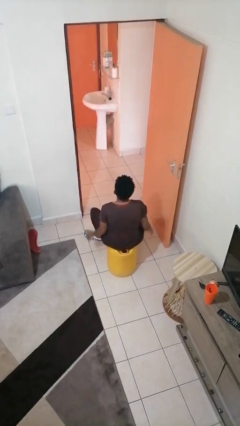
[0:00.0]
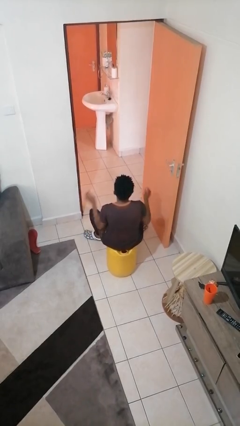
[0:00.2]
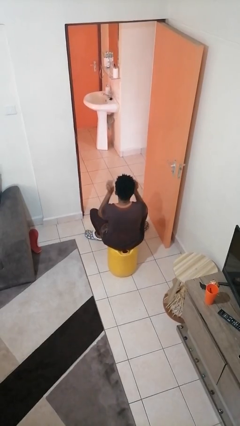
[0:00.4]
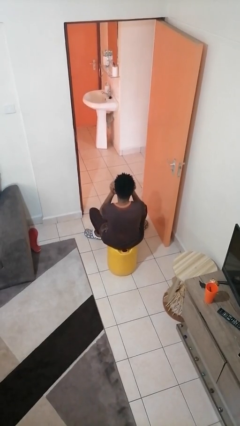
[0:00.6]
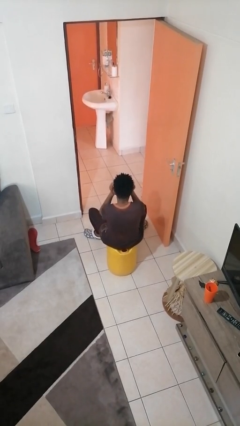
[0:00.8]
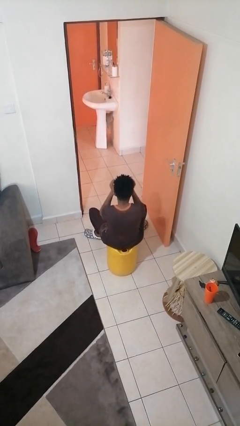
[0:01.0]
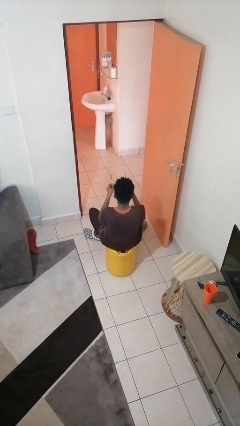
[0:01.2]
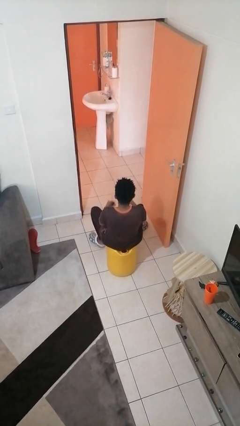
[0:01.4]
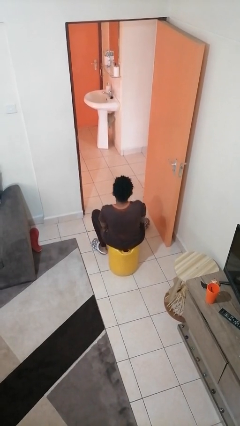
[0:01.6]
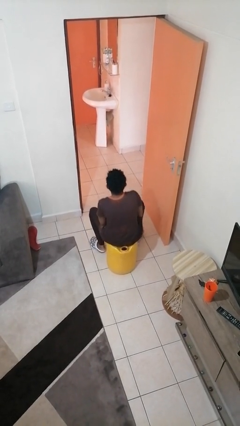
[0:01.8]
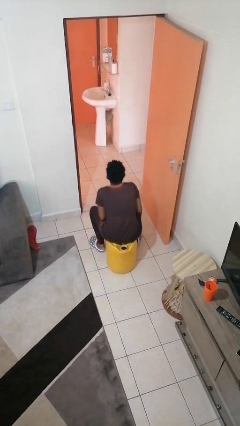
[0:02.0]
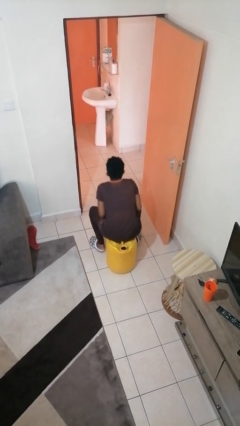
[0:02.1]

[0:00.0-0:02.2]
person takes off glasses

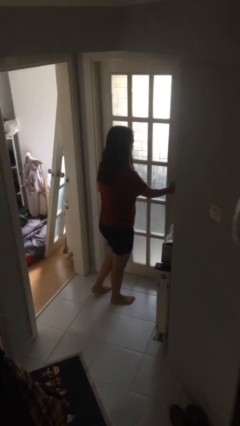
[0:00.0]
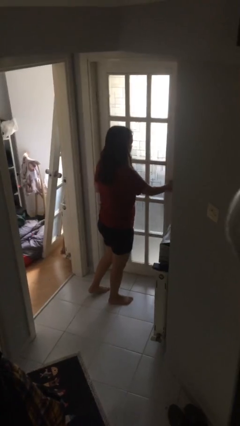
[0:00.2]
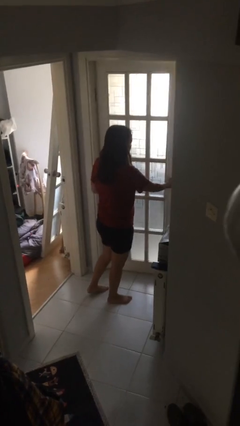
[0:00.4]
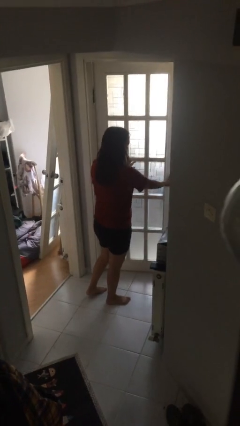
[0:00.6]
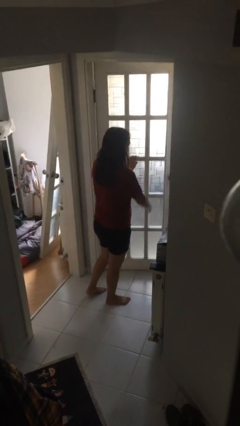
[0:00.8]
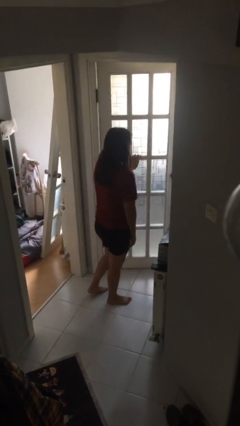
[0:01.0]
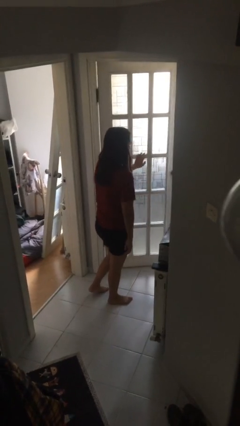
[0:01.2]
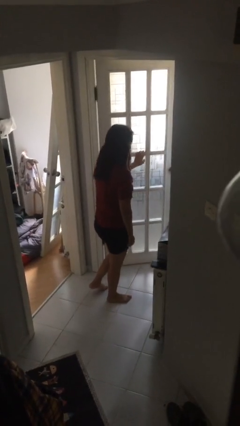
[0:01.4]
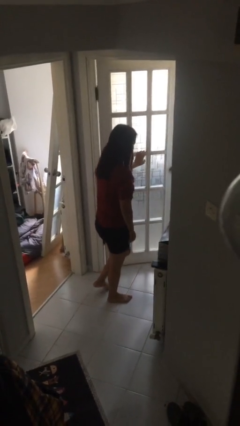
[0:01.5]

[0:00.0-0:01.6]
person opens facility door

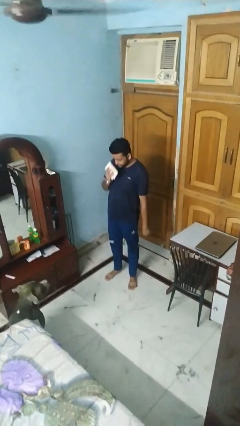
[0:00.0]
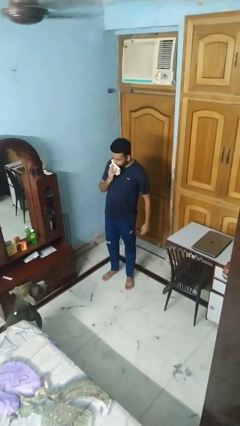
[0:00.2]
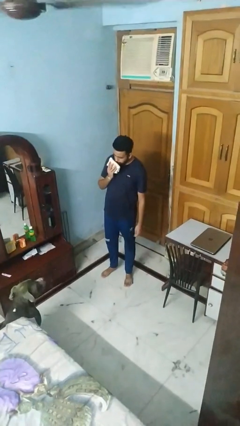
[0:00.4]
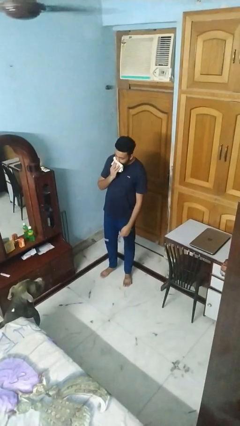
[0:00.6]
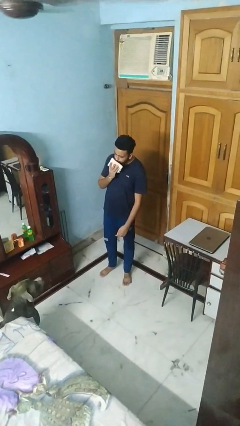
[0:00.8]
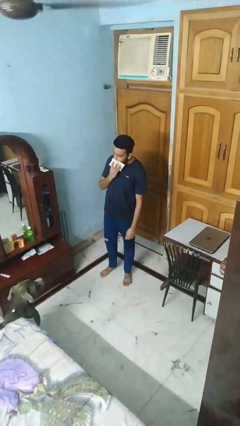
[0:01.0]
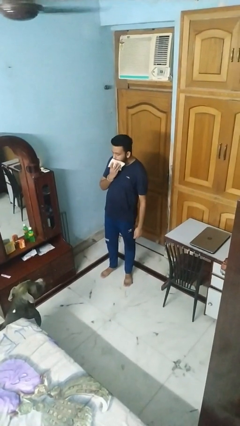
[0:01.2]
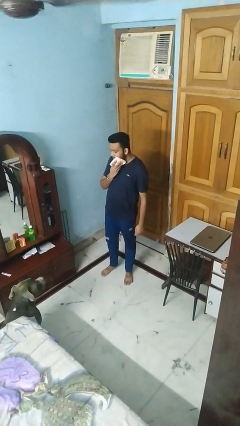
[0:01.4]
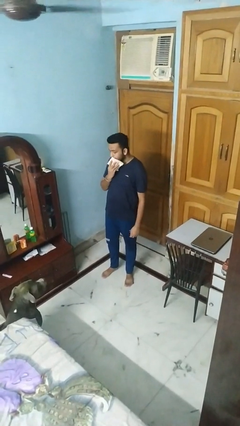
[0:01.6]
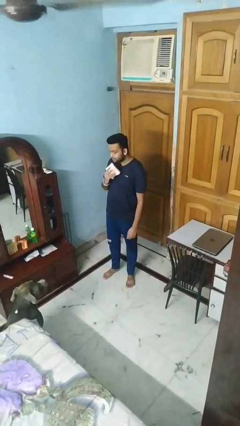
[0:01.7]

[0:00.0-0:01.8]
person wipes mouth with napkin

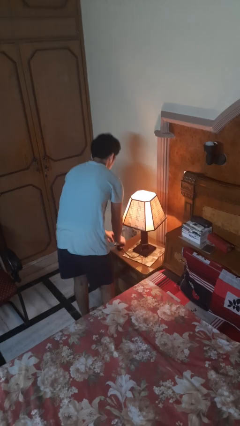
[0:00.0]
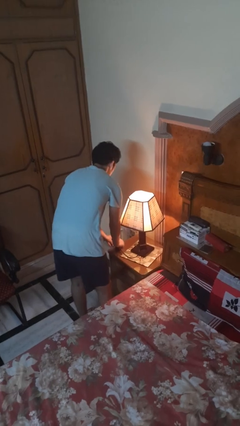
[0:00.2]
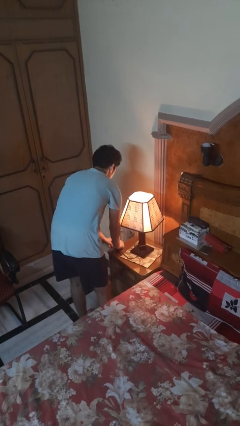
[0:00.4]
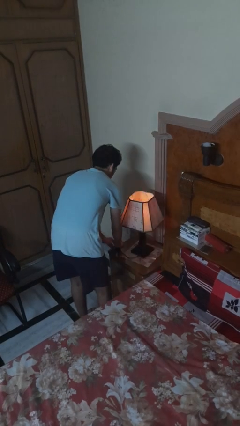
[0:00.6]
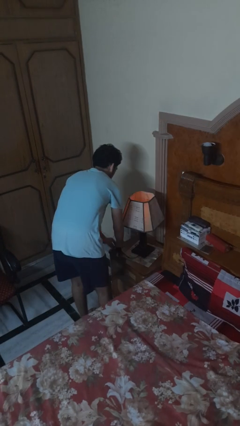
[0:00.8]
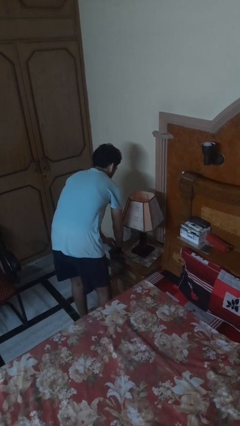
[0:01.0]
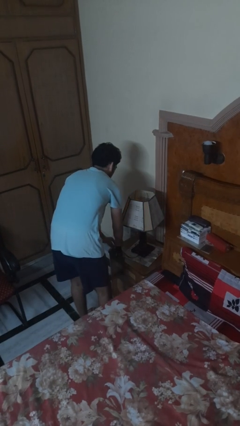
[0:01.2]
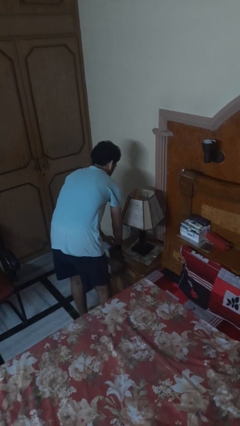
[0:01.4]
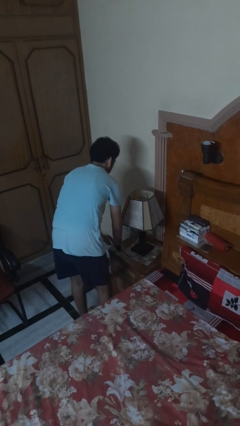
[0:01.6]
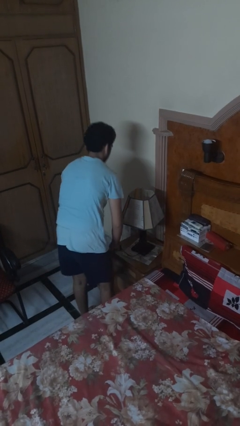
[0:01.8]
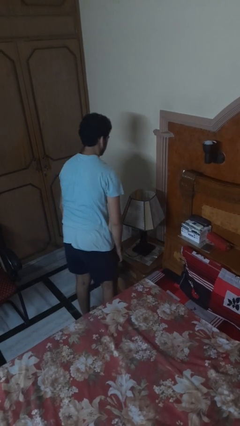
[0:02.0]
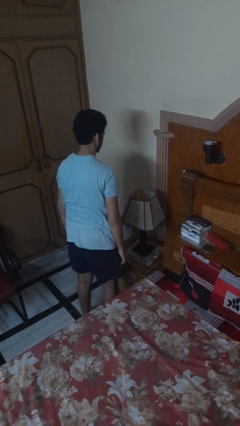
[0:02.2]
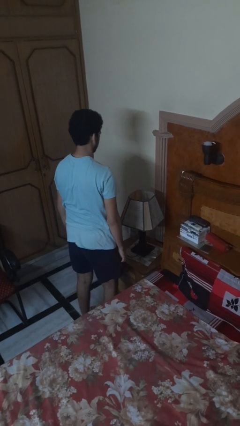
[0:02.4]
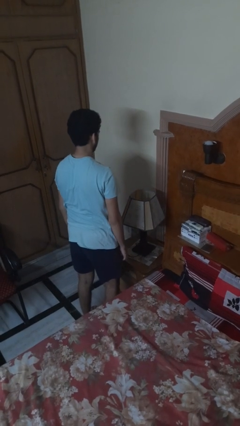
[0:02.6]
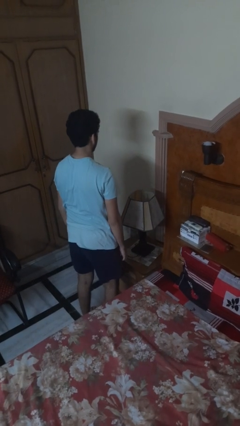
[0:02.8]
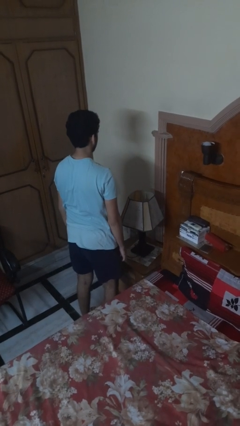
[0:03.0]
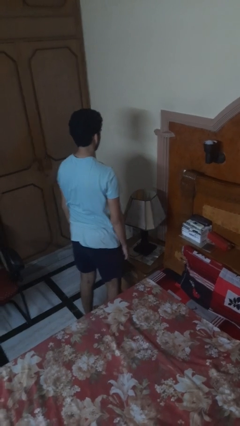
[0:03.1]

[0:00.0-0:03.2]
person turns off lamp

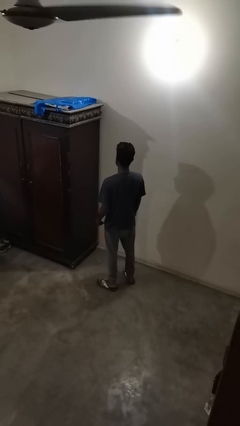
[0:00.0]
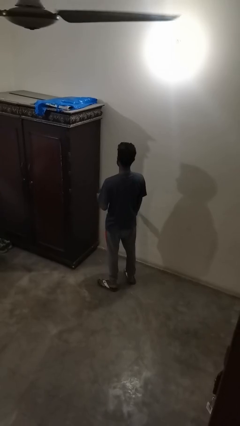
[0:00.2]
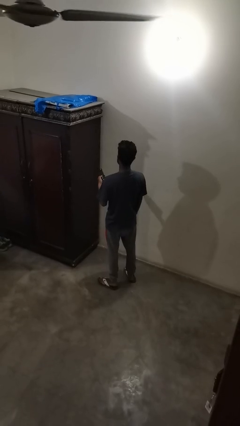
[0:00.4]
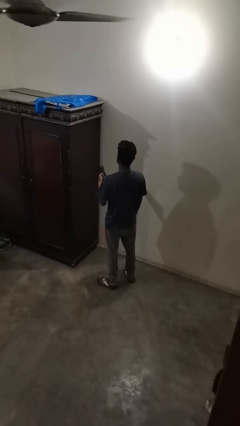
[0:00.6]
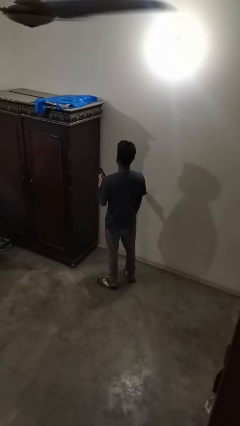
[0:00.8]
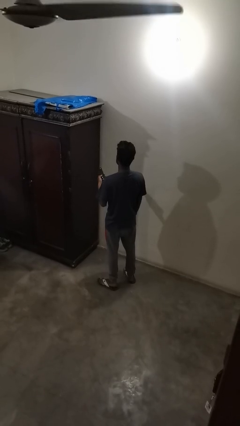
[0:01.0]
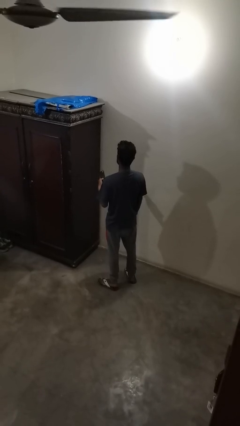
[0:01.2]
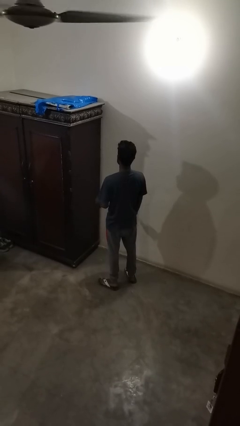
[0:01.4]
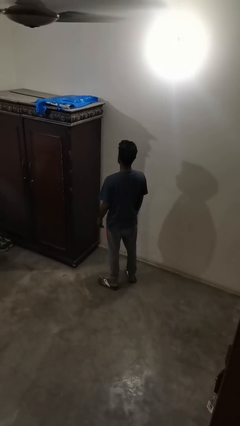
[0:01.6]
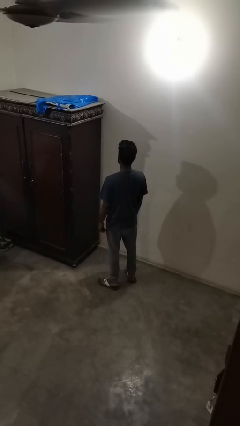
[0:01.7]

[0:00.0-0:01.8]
person uses television remote

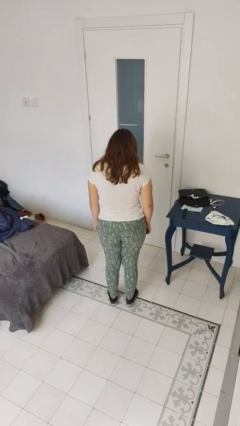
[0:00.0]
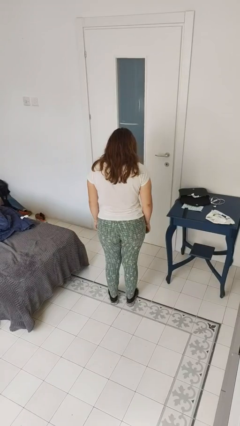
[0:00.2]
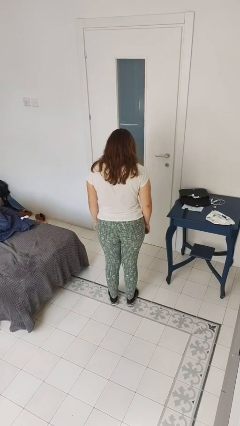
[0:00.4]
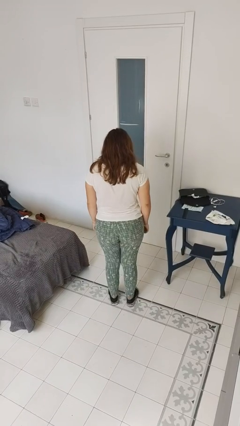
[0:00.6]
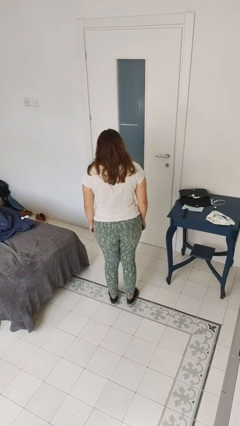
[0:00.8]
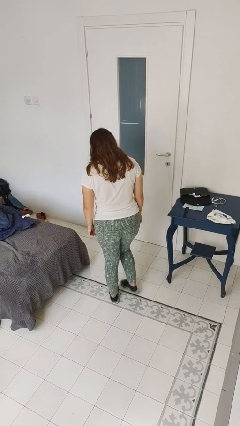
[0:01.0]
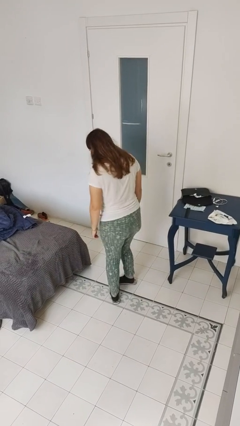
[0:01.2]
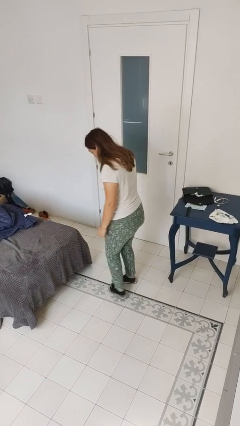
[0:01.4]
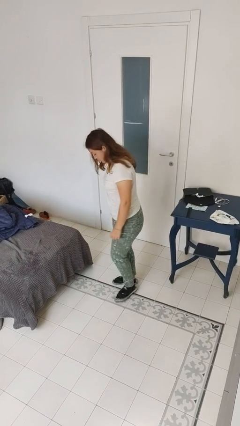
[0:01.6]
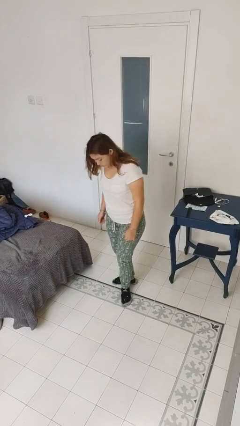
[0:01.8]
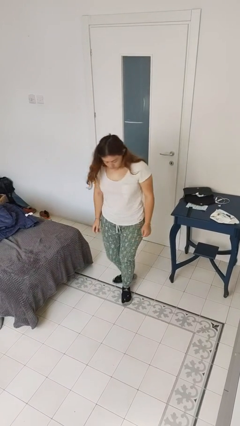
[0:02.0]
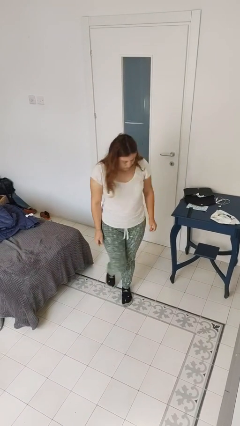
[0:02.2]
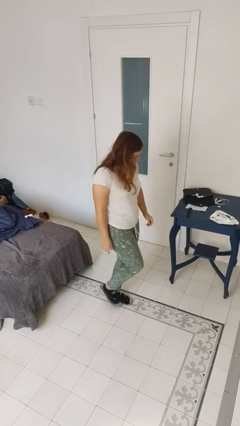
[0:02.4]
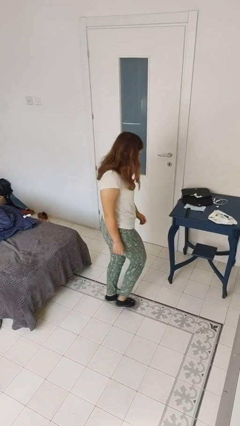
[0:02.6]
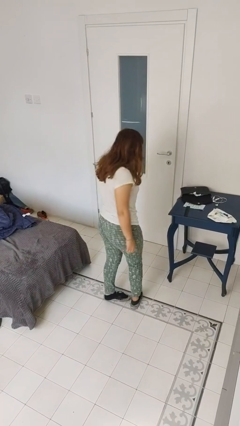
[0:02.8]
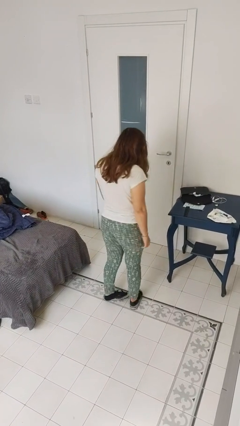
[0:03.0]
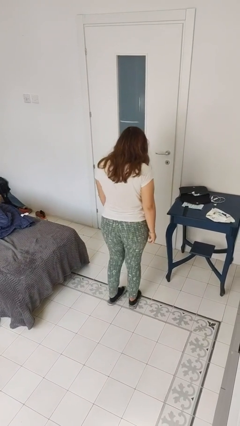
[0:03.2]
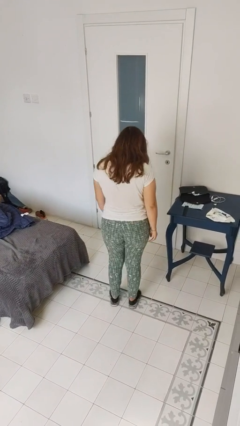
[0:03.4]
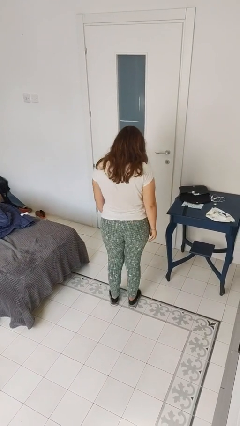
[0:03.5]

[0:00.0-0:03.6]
person twirls

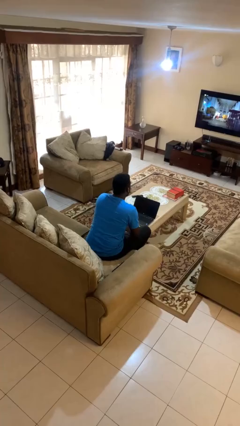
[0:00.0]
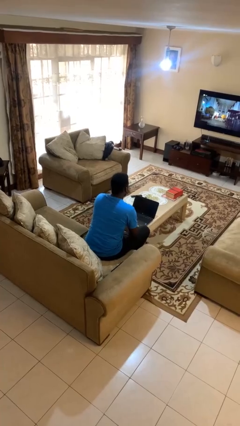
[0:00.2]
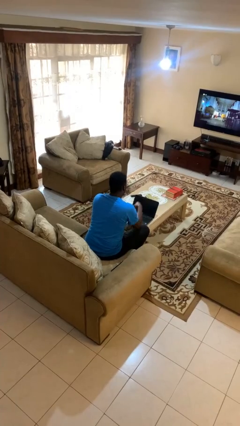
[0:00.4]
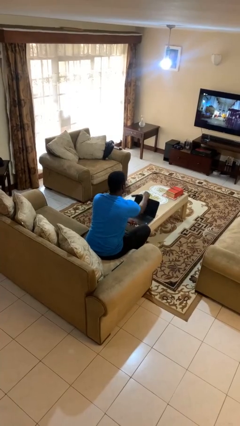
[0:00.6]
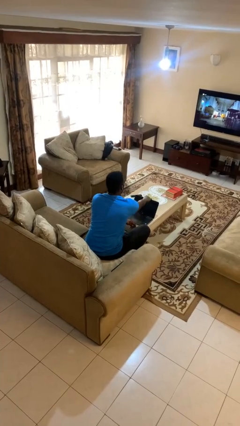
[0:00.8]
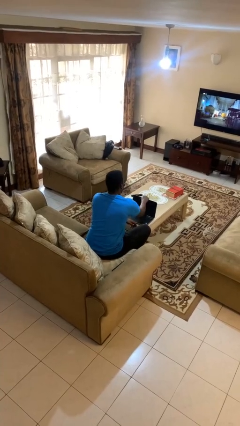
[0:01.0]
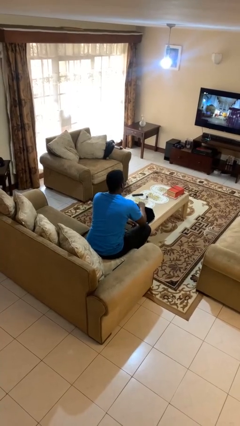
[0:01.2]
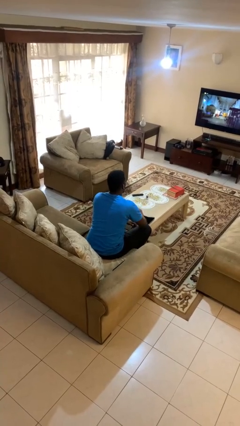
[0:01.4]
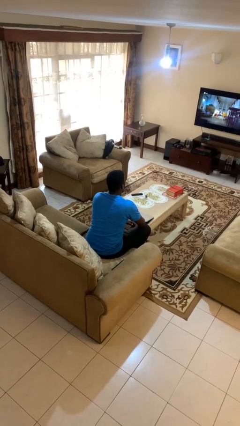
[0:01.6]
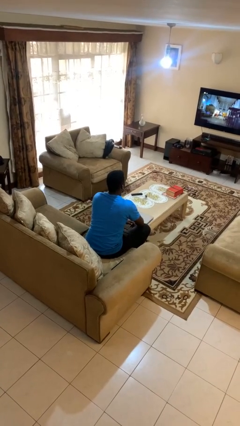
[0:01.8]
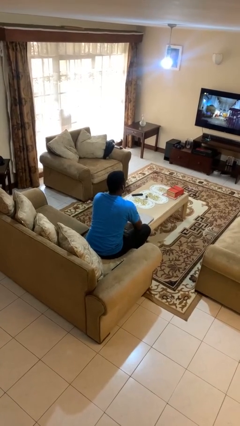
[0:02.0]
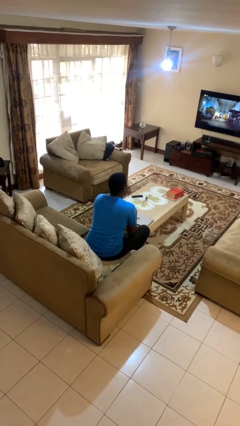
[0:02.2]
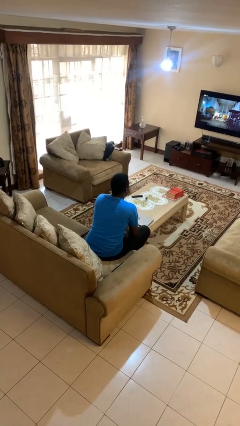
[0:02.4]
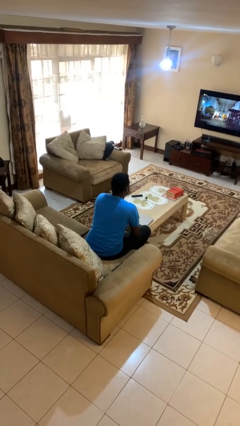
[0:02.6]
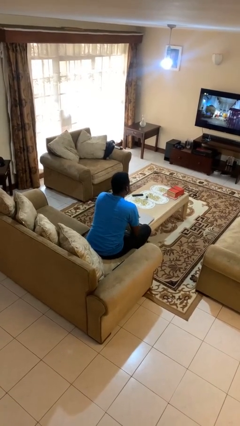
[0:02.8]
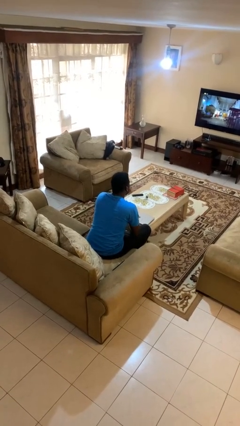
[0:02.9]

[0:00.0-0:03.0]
person closes laptop
